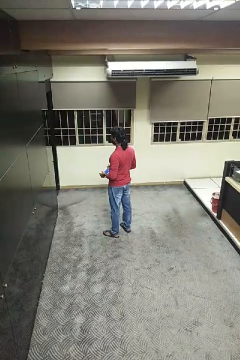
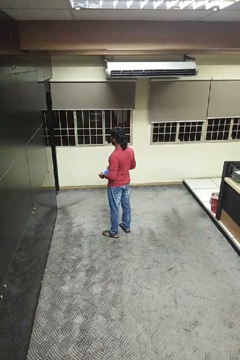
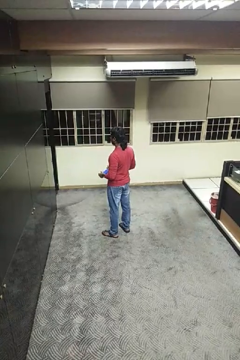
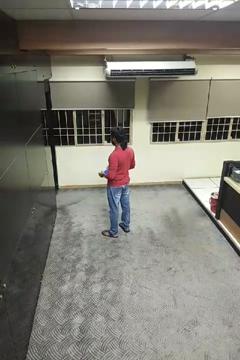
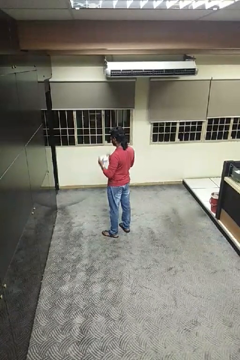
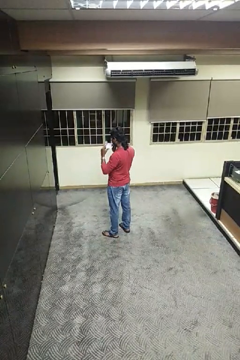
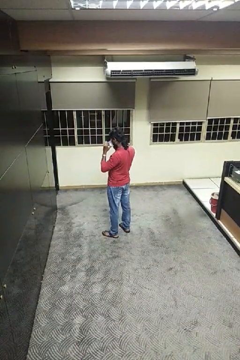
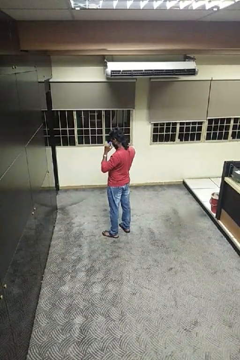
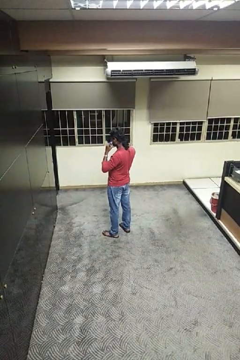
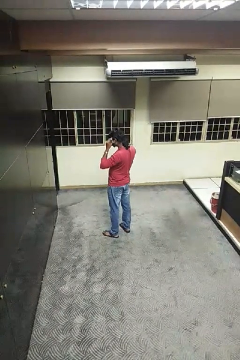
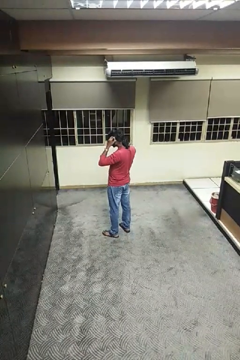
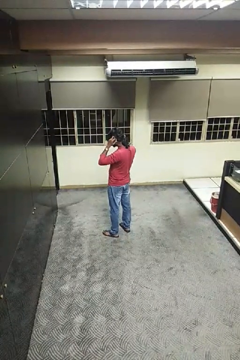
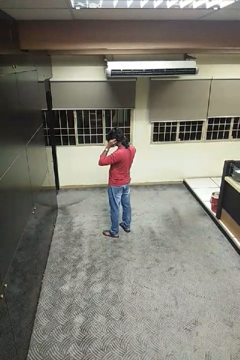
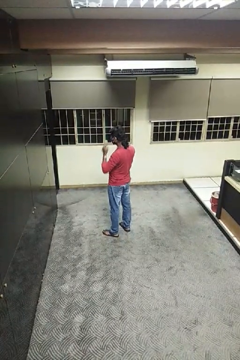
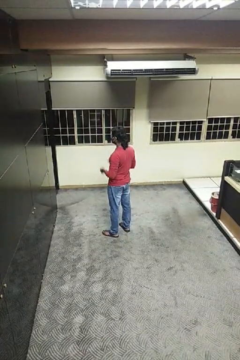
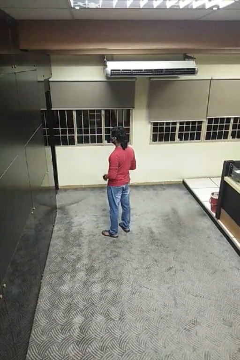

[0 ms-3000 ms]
person puts on facemask

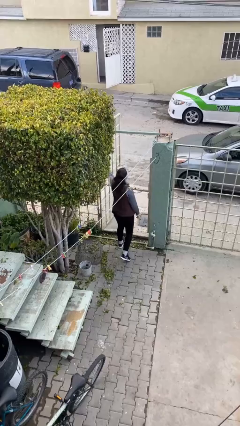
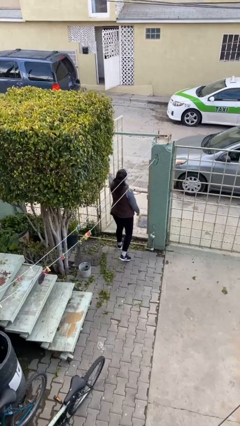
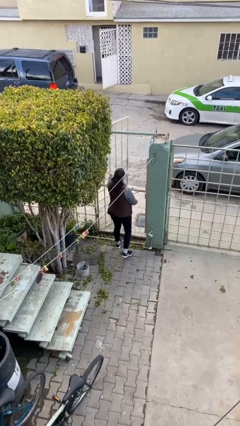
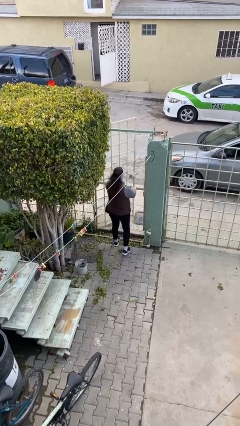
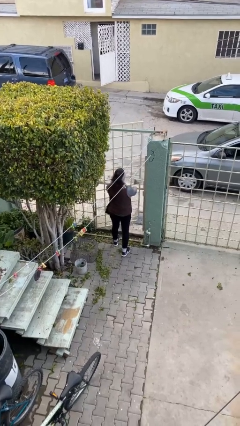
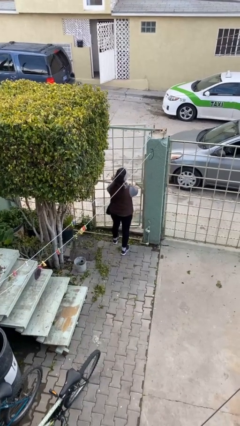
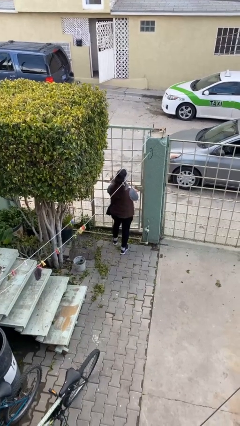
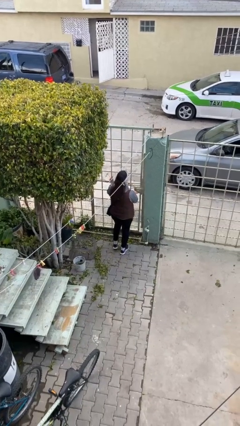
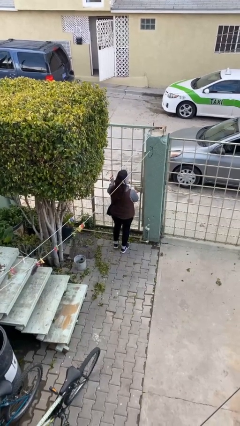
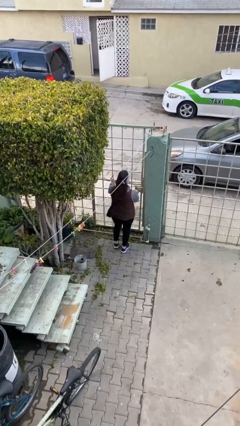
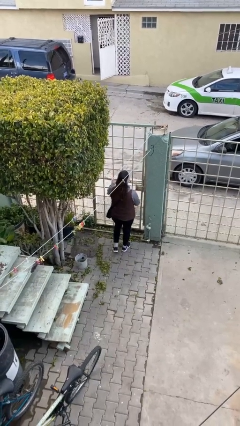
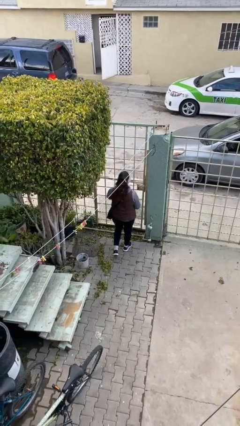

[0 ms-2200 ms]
person closes facility door

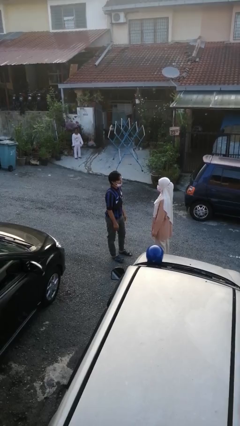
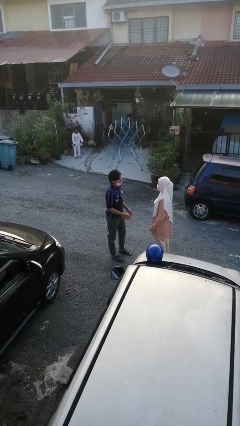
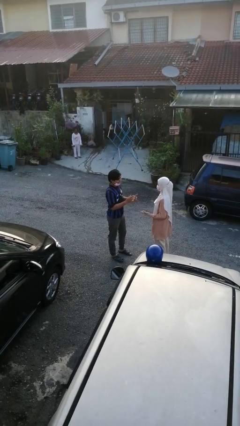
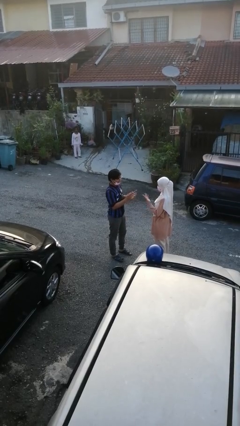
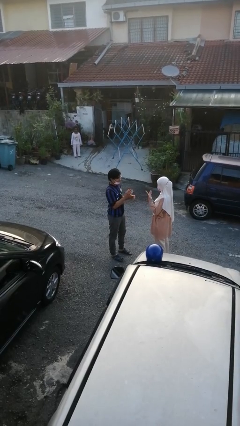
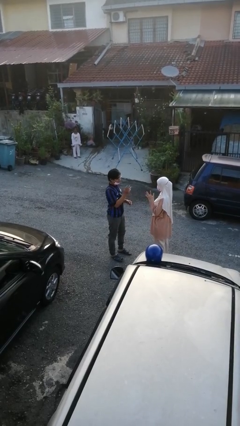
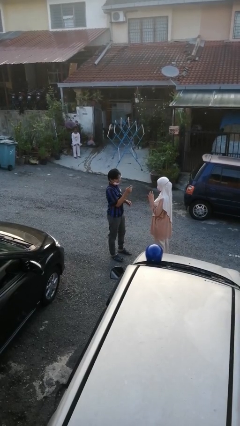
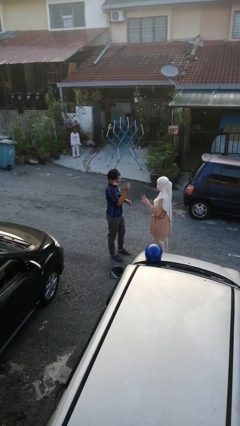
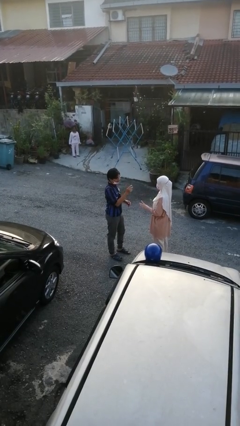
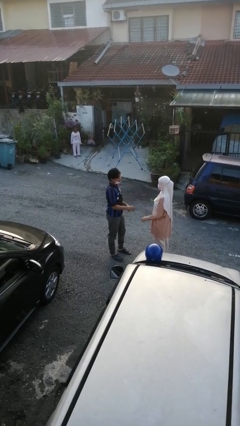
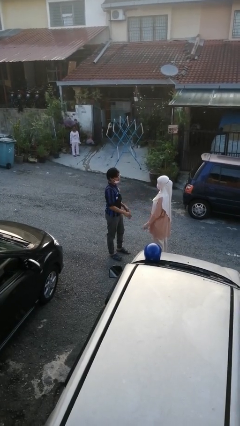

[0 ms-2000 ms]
person talks to person

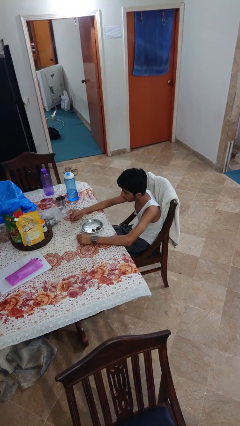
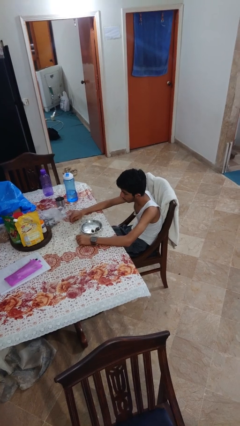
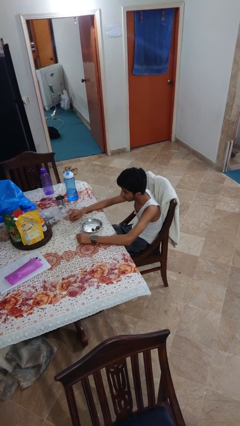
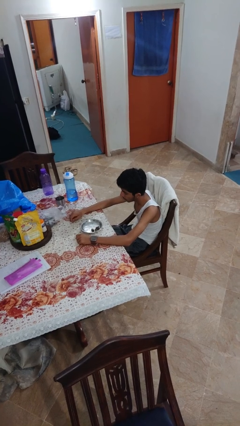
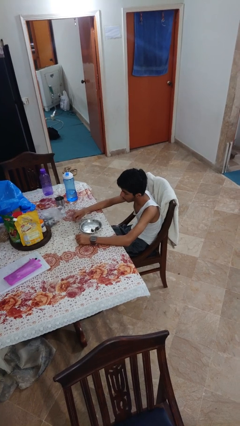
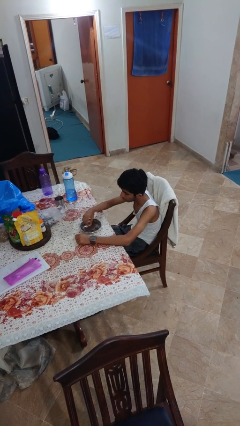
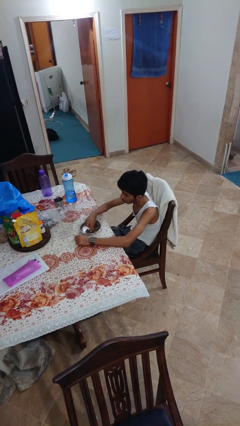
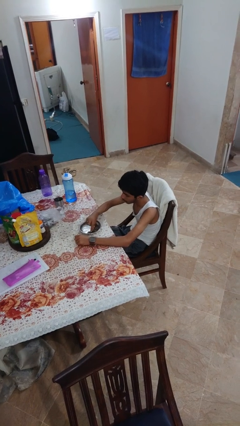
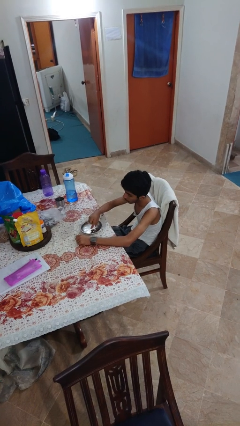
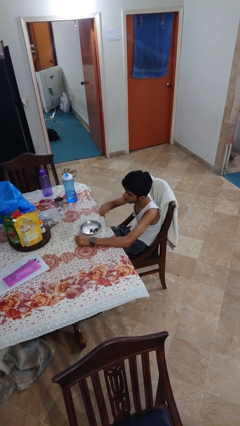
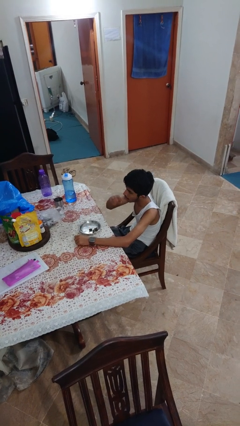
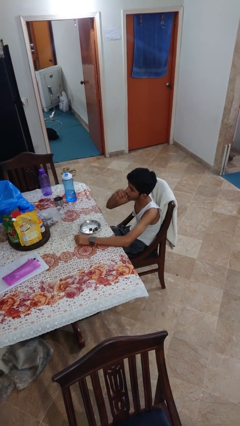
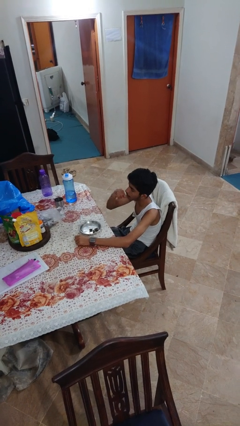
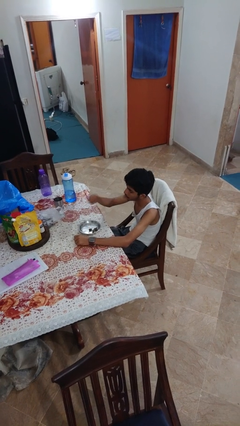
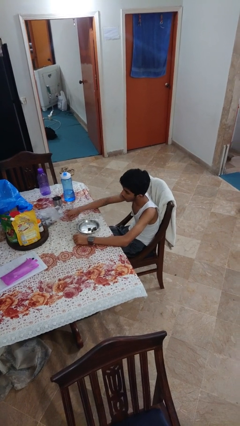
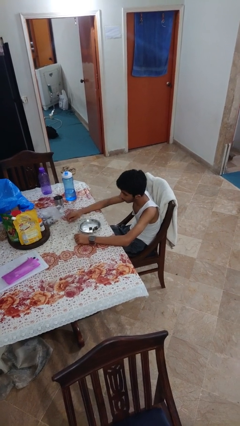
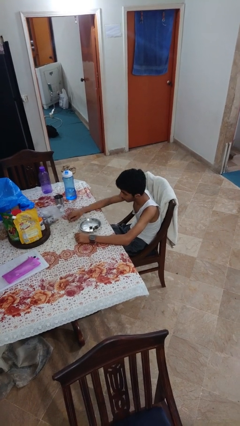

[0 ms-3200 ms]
person eats with hands

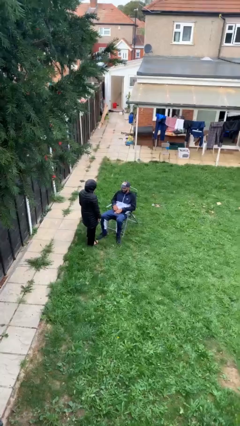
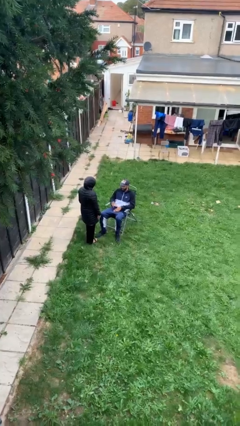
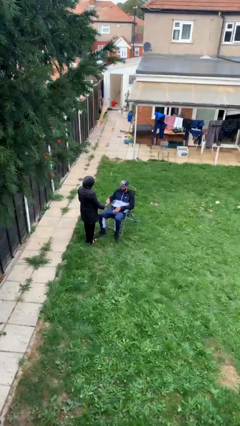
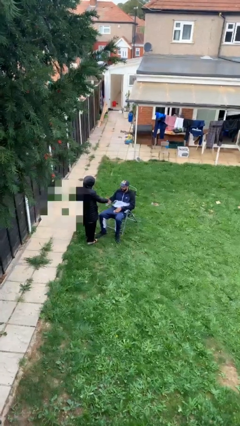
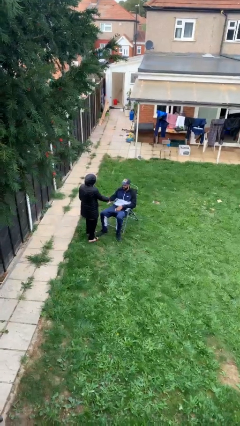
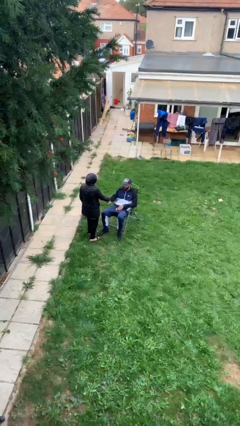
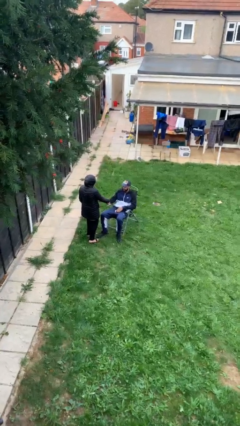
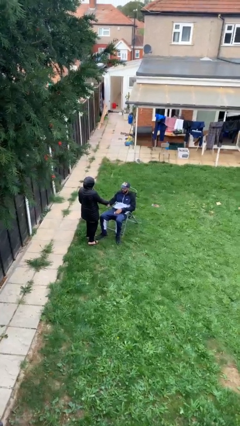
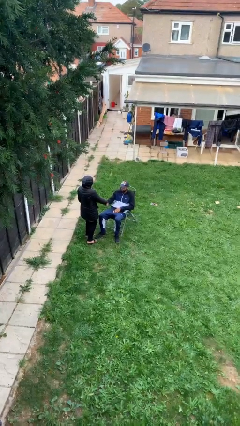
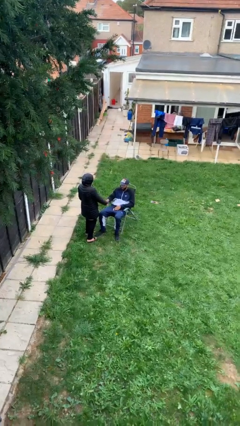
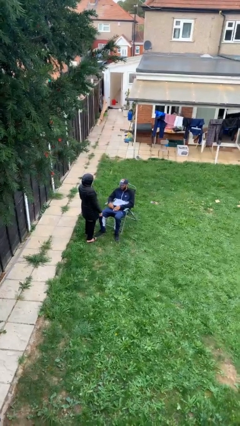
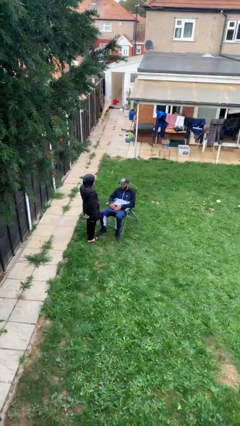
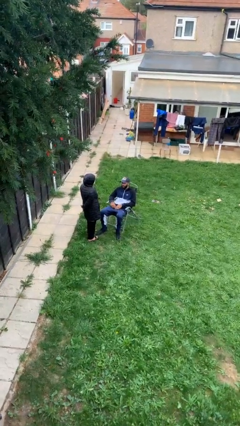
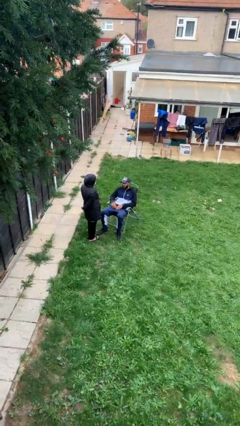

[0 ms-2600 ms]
person shakes hand

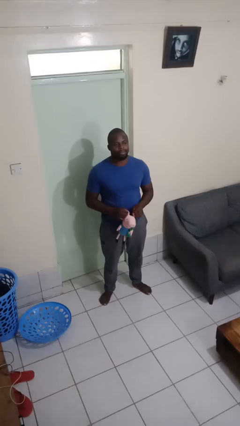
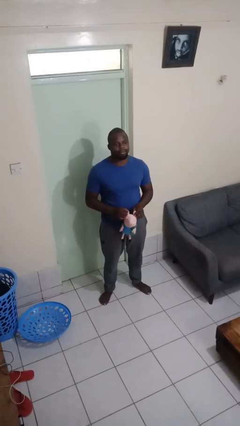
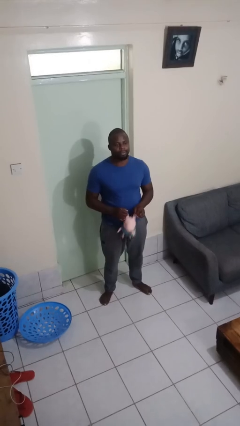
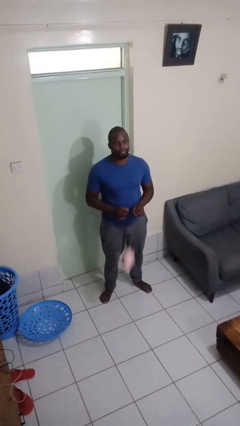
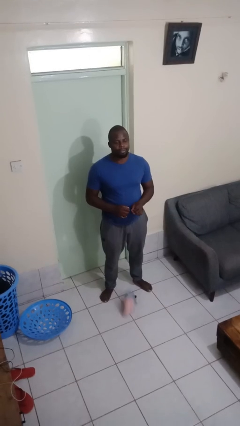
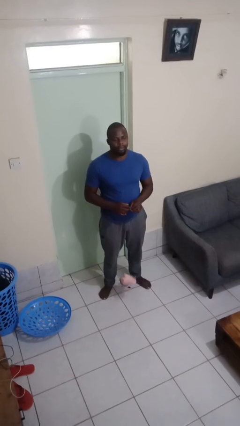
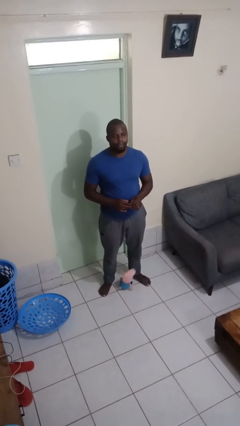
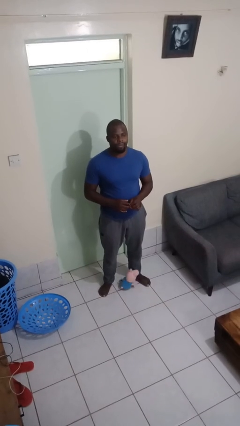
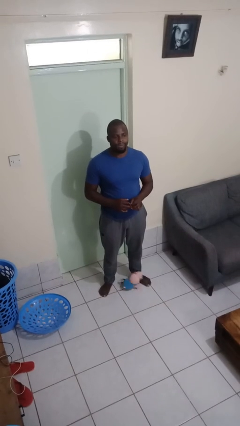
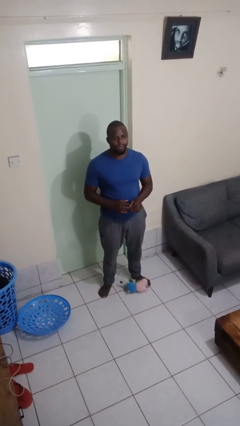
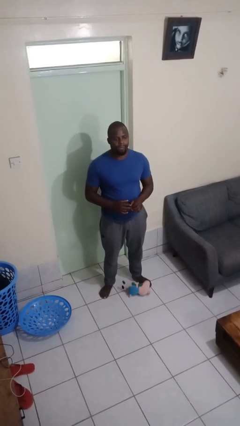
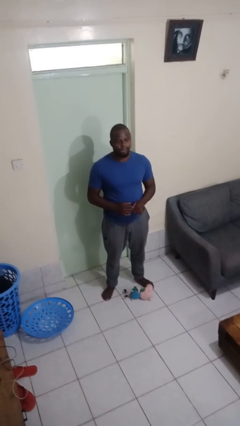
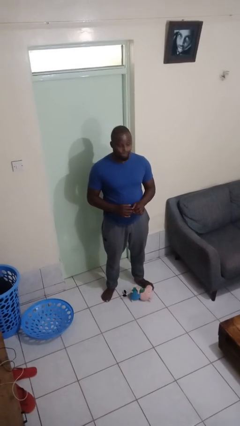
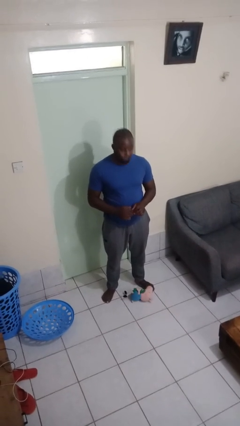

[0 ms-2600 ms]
person drops object

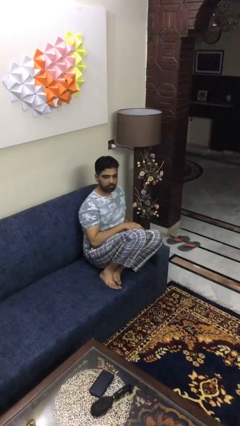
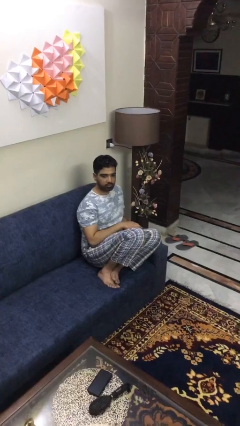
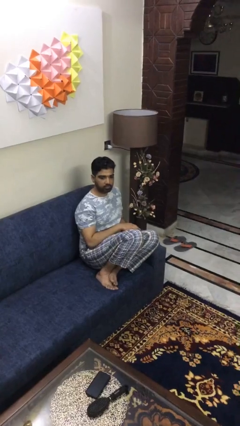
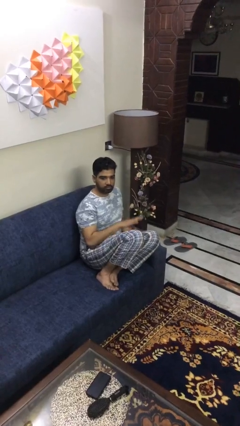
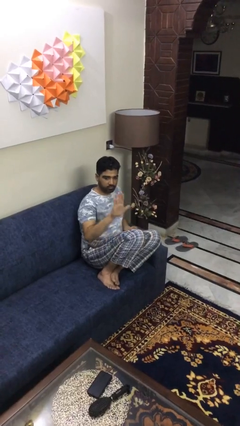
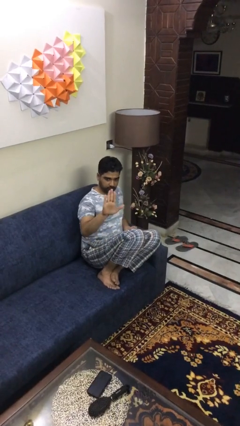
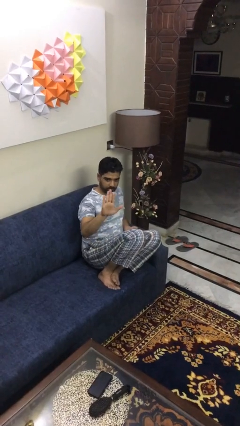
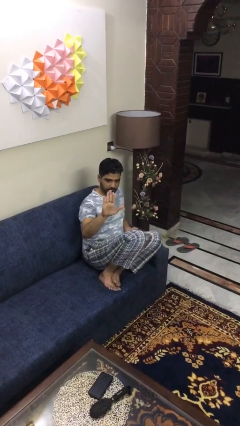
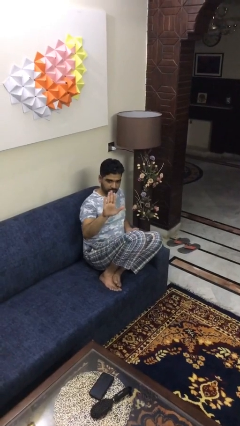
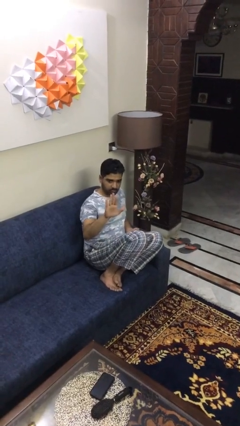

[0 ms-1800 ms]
person gestures stop

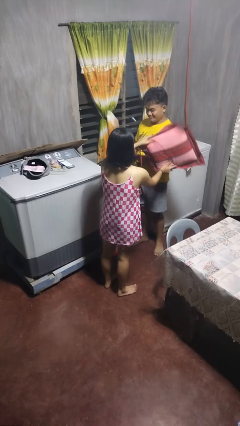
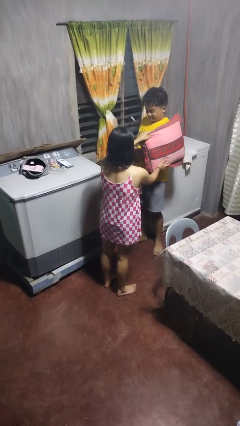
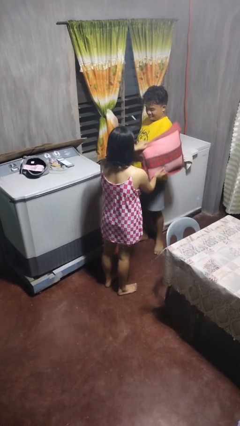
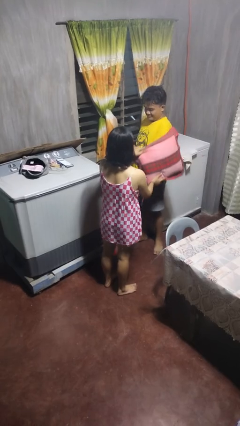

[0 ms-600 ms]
person hits person with pillow
